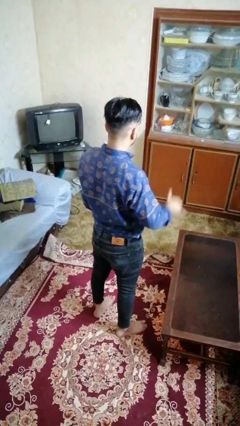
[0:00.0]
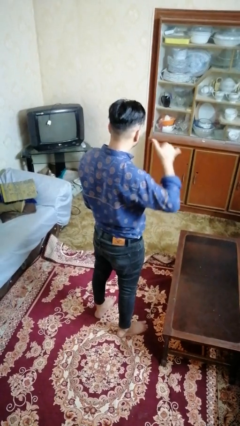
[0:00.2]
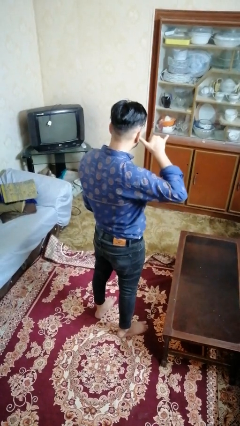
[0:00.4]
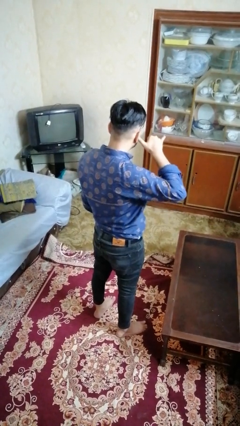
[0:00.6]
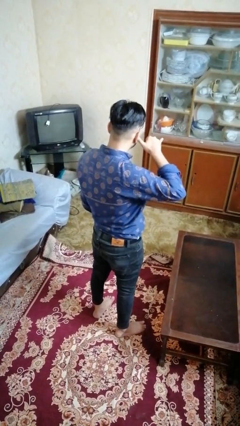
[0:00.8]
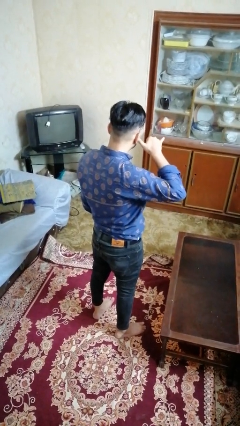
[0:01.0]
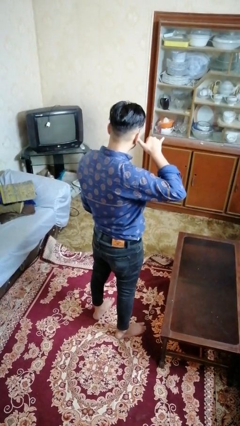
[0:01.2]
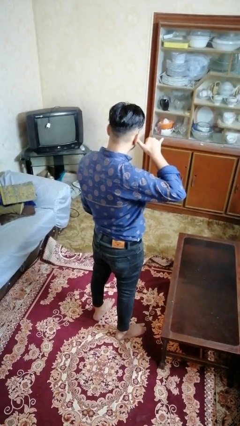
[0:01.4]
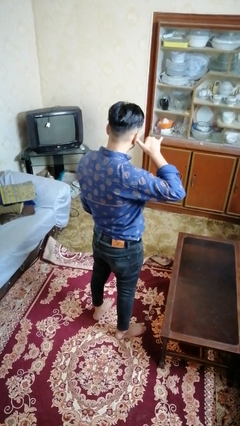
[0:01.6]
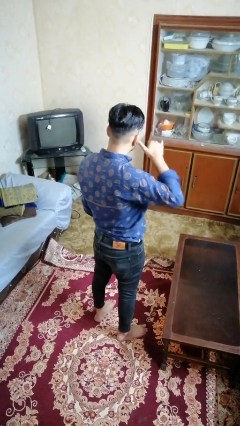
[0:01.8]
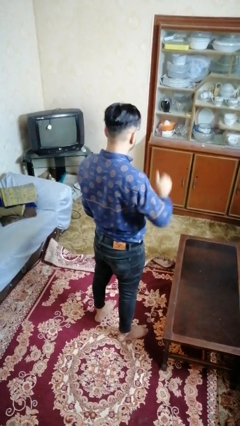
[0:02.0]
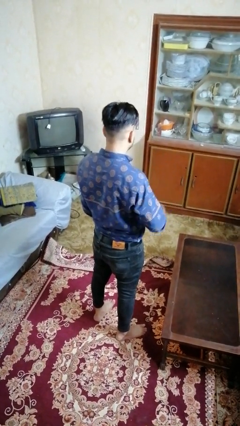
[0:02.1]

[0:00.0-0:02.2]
person gestures call me

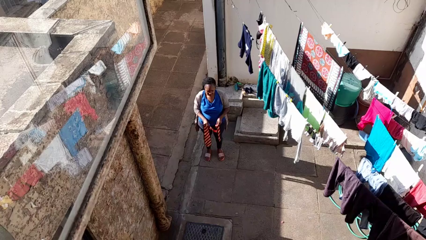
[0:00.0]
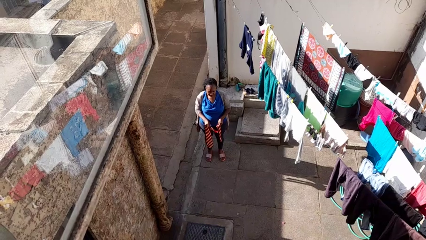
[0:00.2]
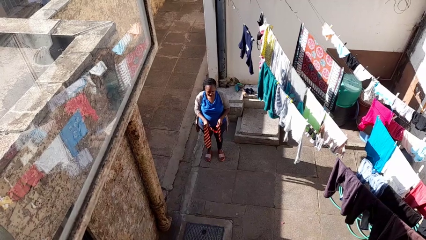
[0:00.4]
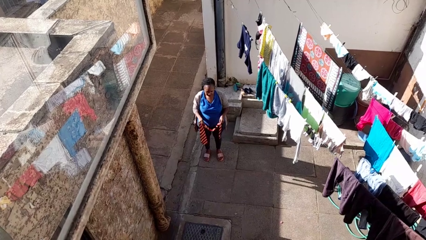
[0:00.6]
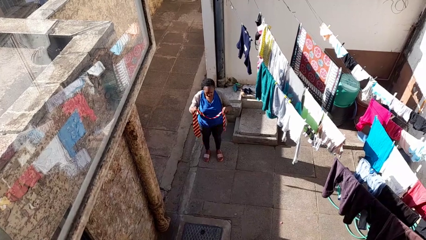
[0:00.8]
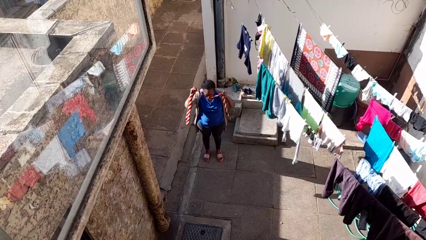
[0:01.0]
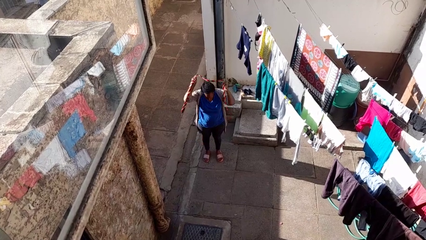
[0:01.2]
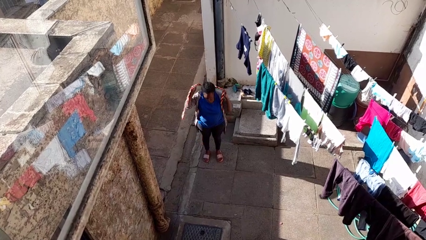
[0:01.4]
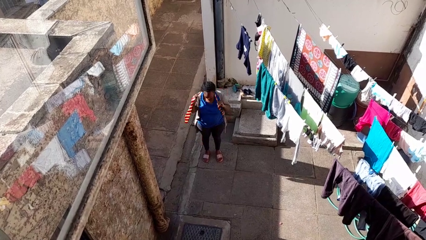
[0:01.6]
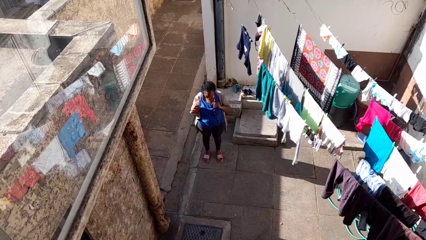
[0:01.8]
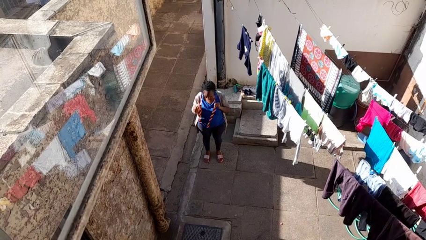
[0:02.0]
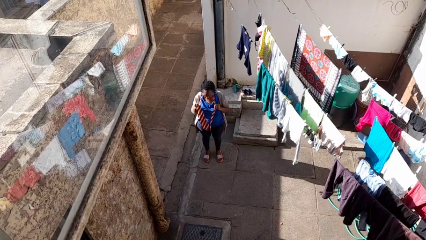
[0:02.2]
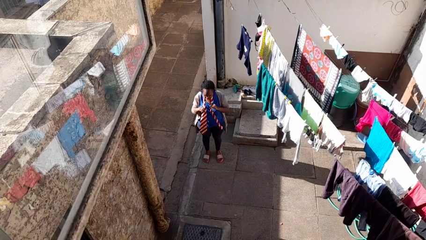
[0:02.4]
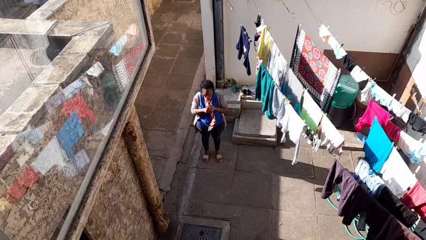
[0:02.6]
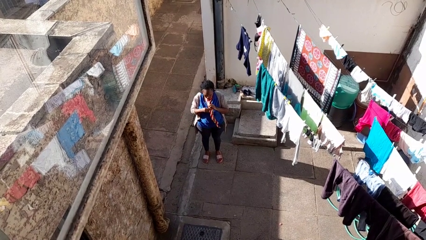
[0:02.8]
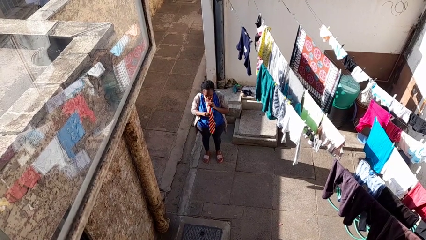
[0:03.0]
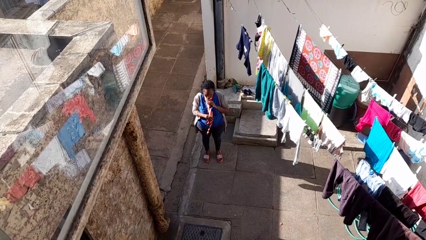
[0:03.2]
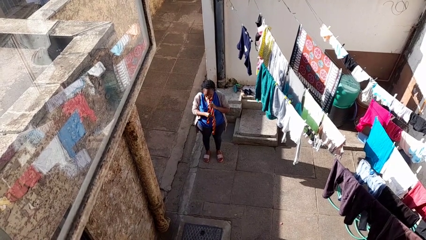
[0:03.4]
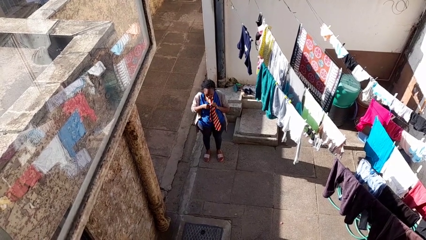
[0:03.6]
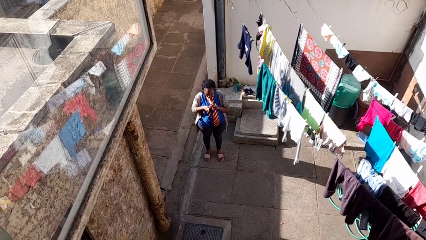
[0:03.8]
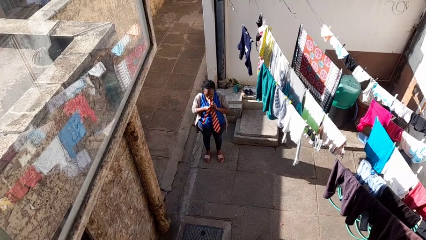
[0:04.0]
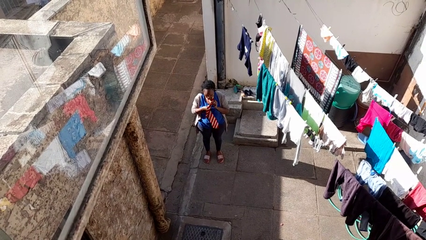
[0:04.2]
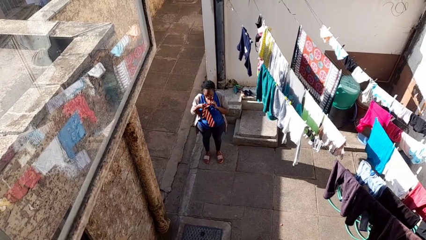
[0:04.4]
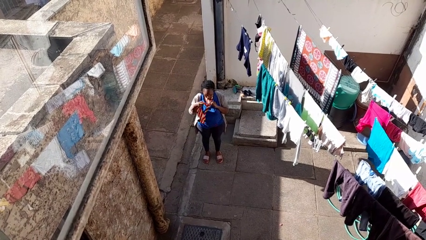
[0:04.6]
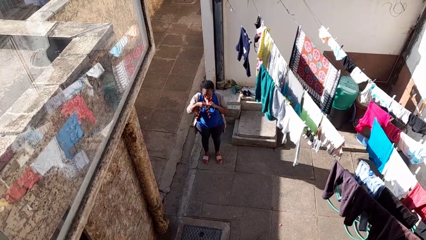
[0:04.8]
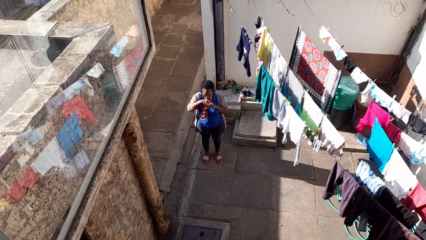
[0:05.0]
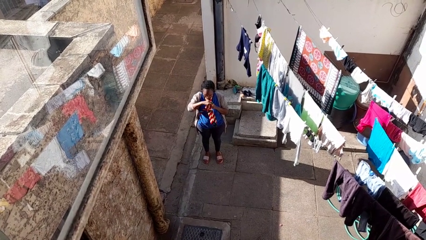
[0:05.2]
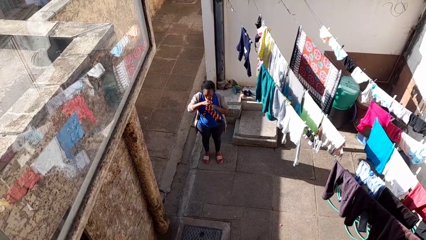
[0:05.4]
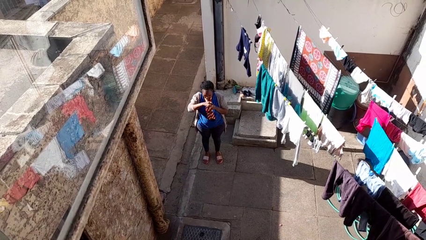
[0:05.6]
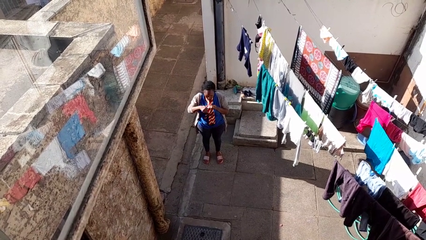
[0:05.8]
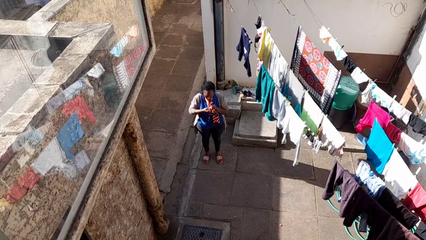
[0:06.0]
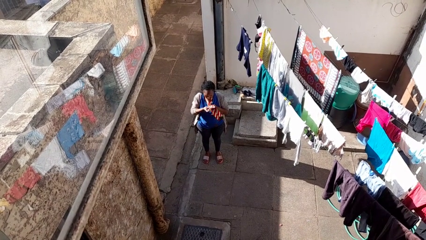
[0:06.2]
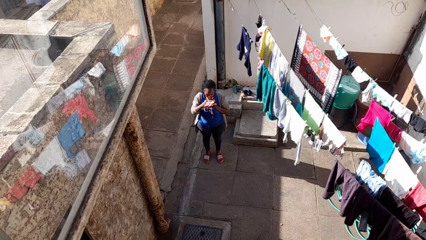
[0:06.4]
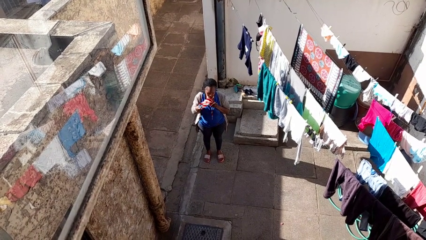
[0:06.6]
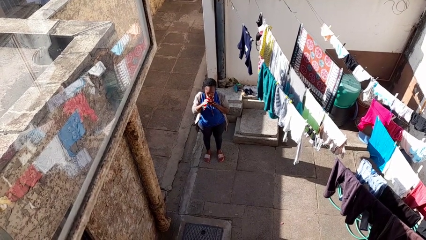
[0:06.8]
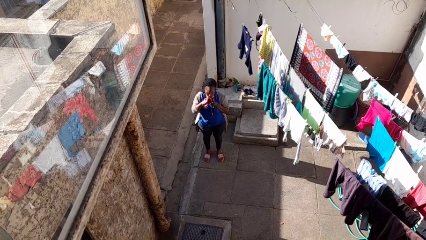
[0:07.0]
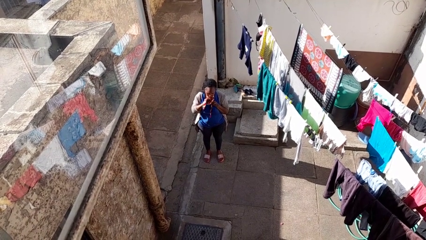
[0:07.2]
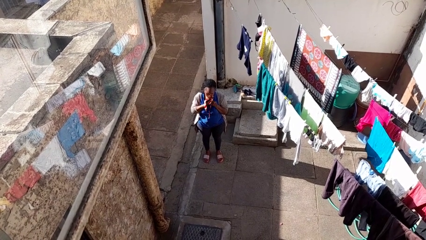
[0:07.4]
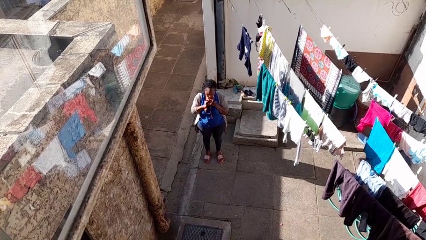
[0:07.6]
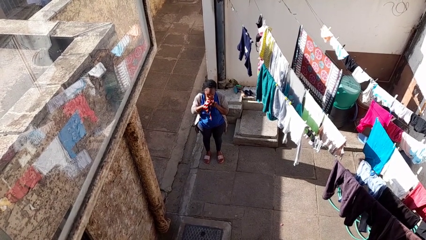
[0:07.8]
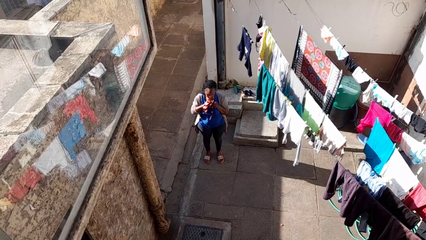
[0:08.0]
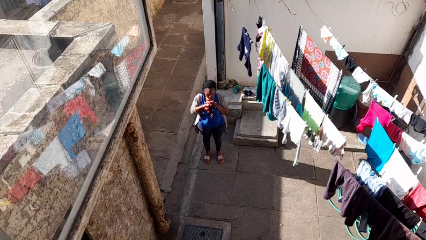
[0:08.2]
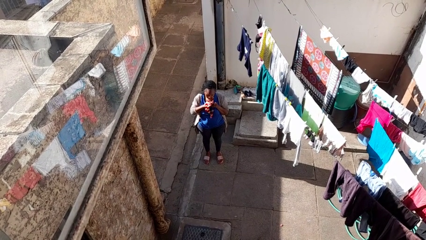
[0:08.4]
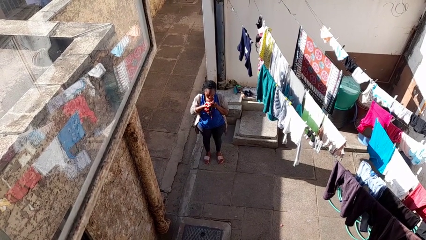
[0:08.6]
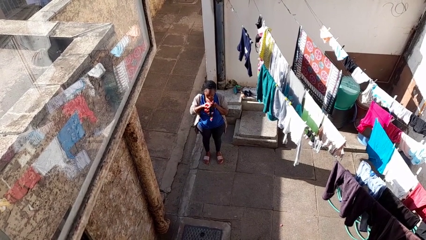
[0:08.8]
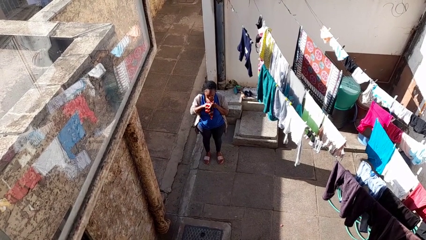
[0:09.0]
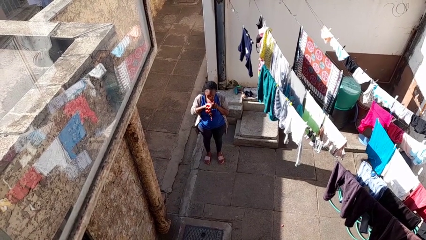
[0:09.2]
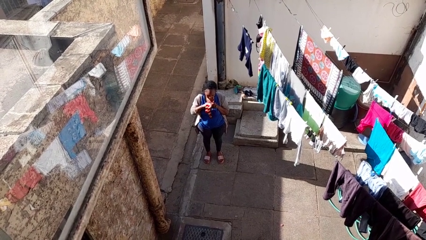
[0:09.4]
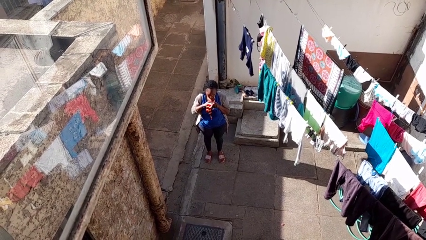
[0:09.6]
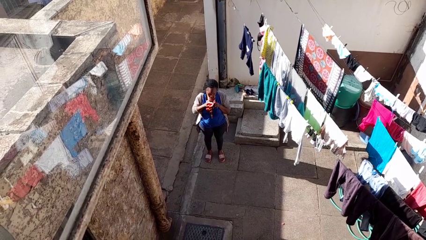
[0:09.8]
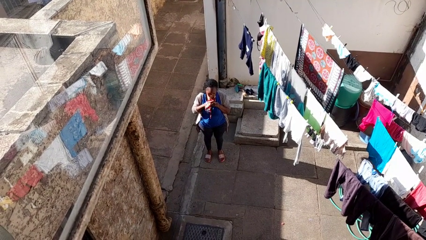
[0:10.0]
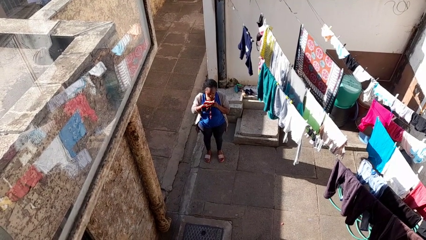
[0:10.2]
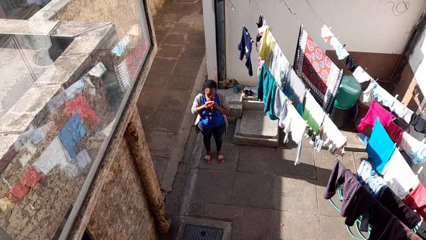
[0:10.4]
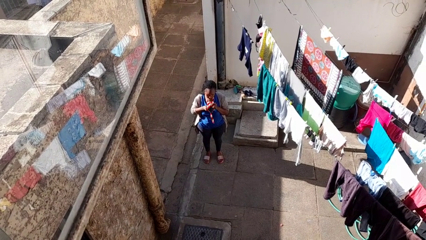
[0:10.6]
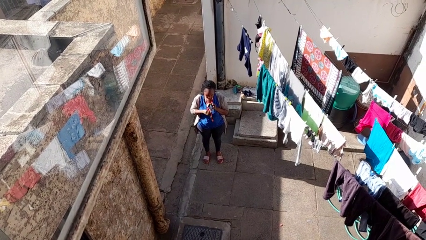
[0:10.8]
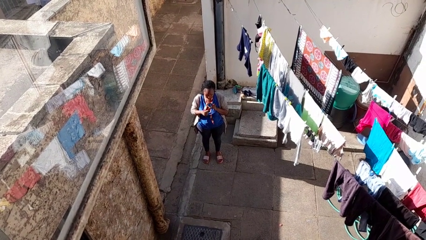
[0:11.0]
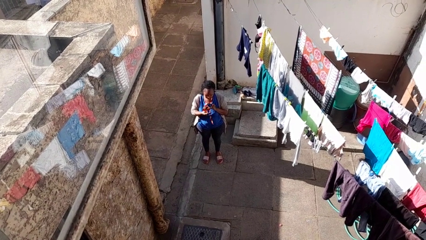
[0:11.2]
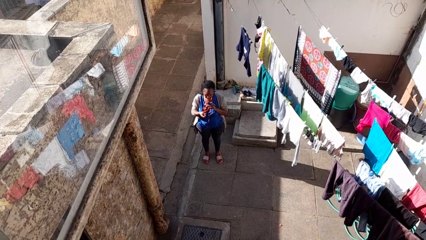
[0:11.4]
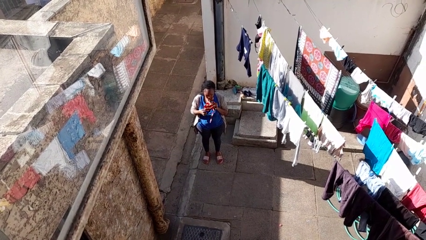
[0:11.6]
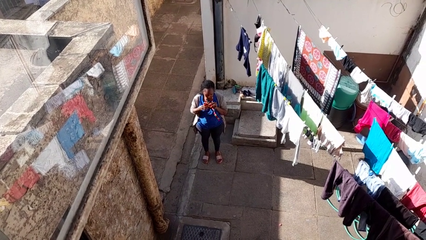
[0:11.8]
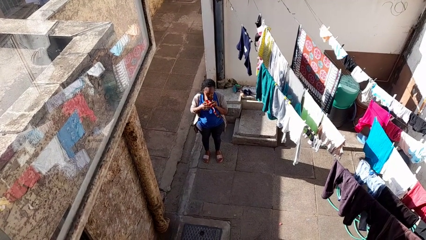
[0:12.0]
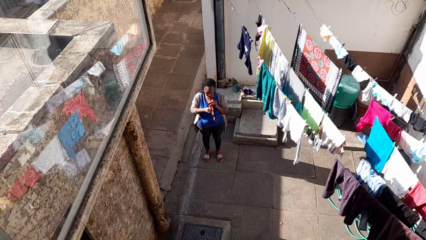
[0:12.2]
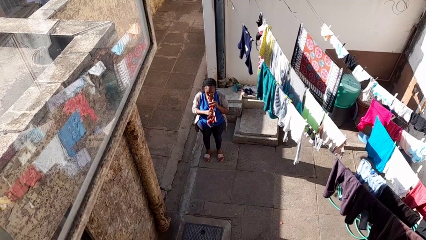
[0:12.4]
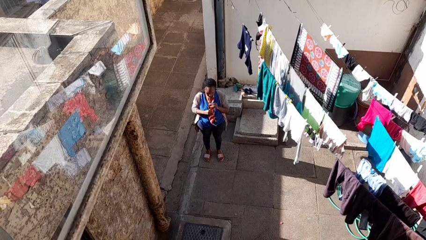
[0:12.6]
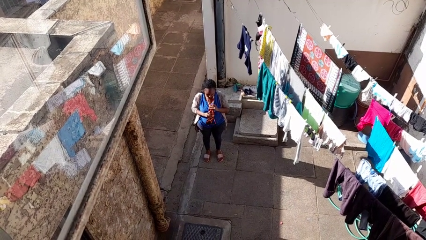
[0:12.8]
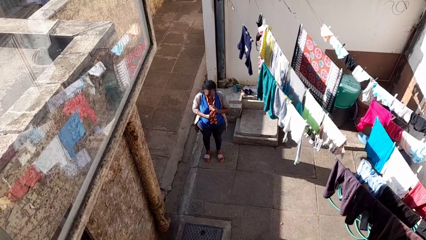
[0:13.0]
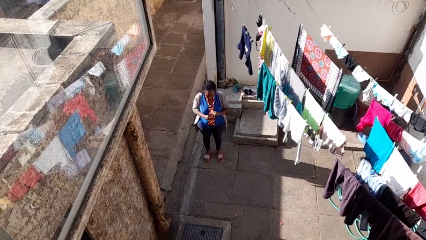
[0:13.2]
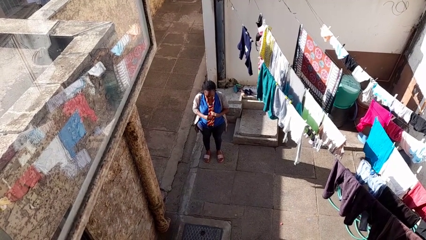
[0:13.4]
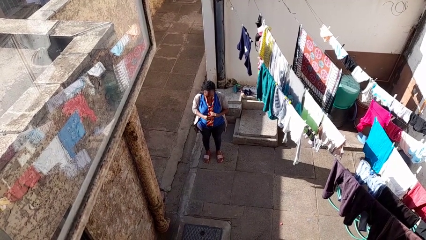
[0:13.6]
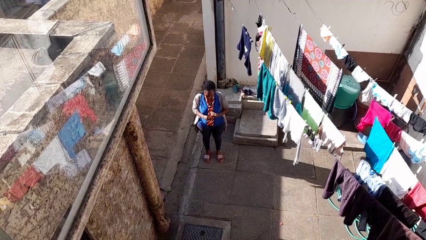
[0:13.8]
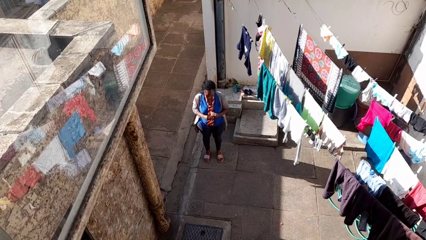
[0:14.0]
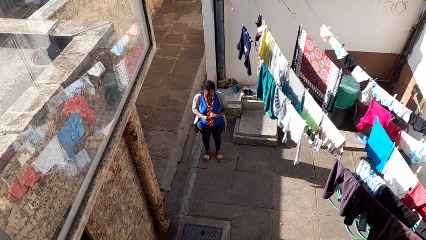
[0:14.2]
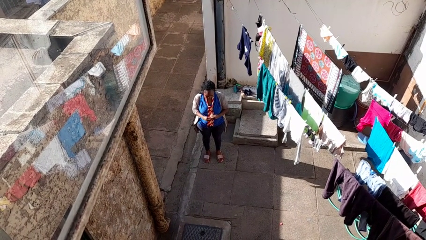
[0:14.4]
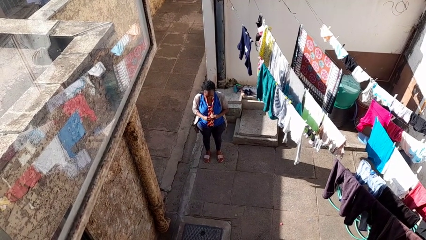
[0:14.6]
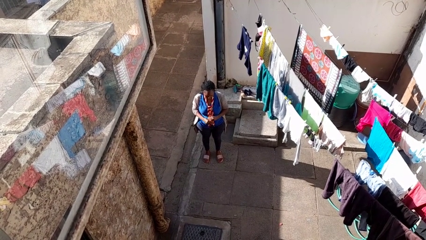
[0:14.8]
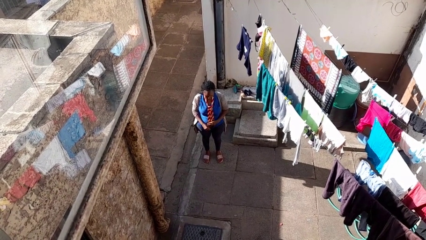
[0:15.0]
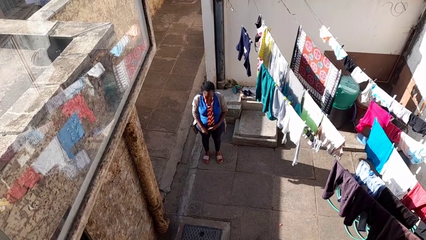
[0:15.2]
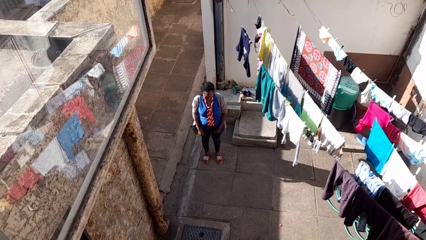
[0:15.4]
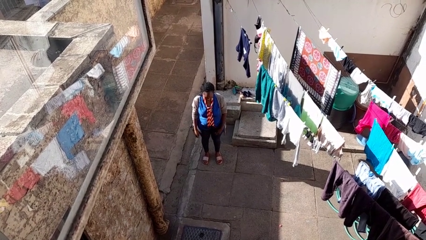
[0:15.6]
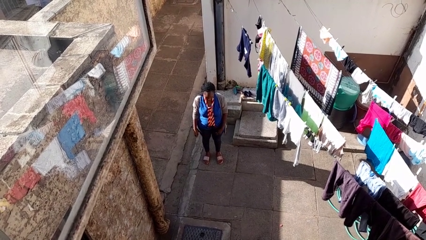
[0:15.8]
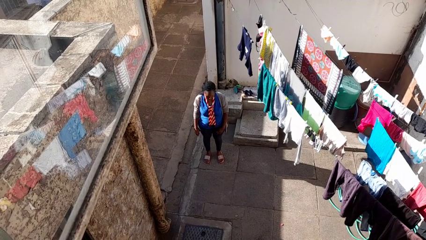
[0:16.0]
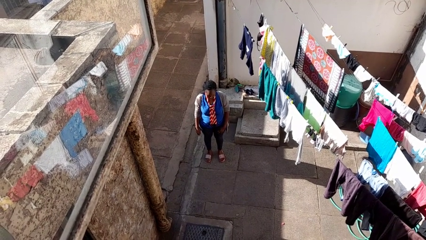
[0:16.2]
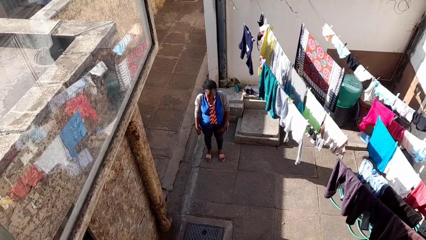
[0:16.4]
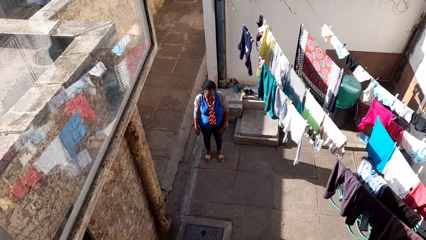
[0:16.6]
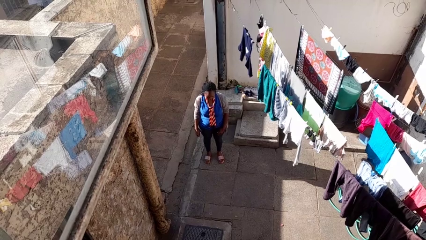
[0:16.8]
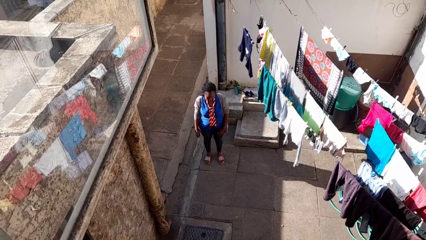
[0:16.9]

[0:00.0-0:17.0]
person puts on necktie
